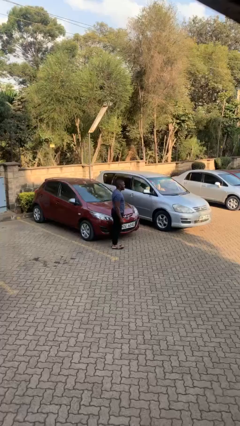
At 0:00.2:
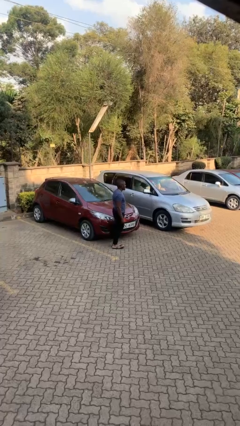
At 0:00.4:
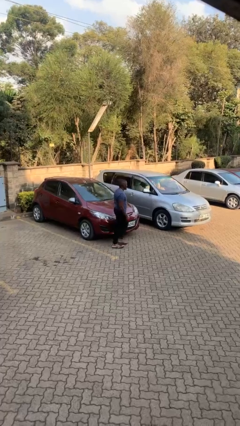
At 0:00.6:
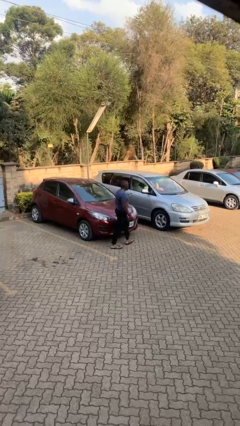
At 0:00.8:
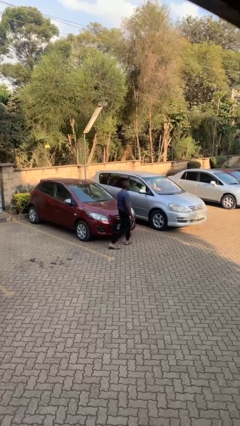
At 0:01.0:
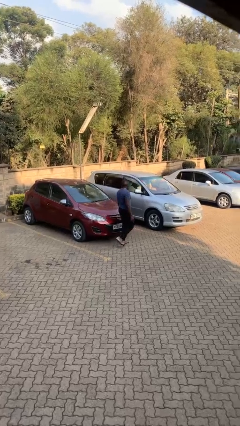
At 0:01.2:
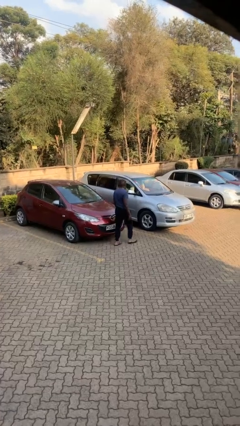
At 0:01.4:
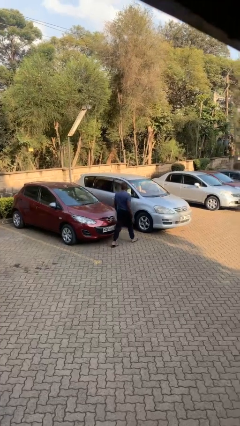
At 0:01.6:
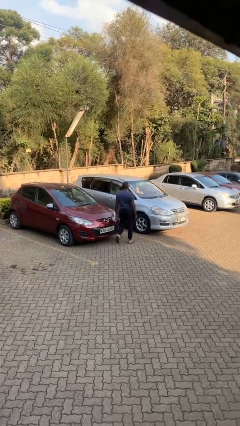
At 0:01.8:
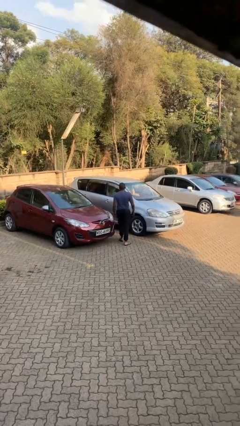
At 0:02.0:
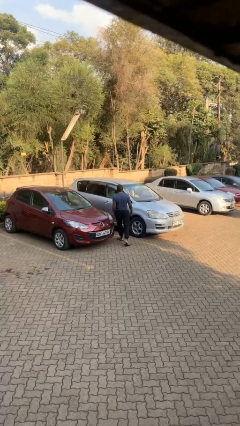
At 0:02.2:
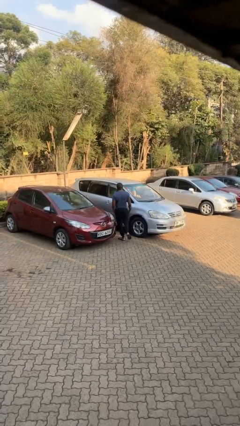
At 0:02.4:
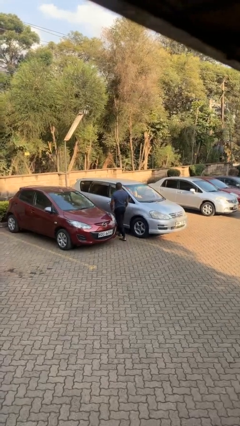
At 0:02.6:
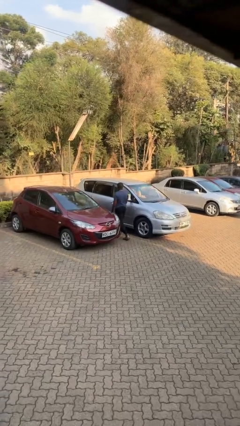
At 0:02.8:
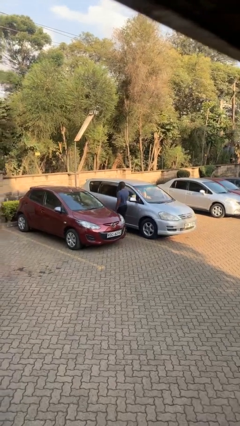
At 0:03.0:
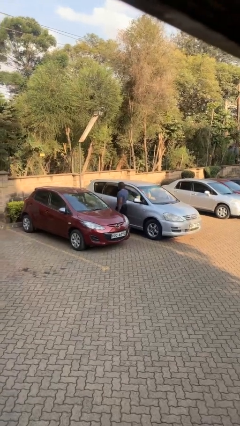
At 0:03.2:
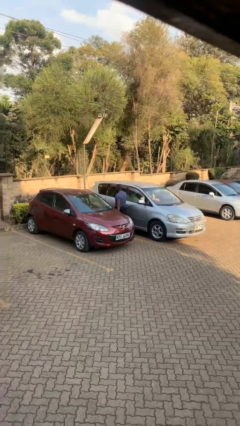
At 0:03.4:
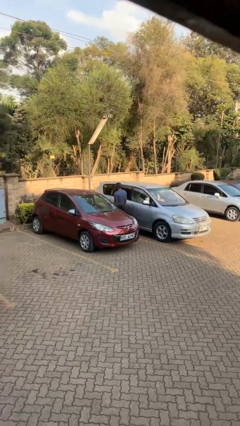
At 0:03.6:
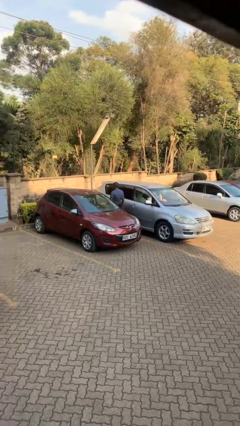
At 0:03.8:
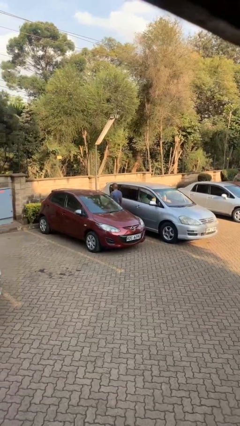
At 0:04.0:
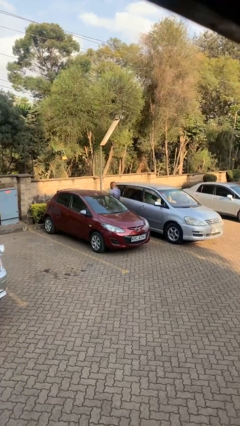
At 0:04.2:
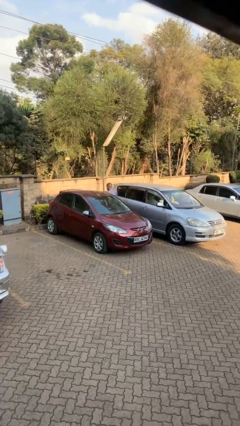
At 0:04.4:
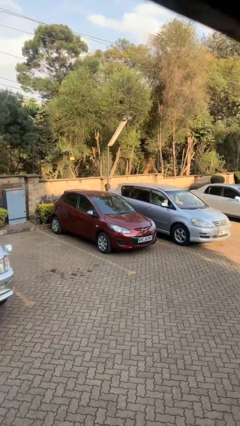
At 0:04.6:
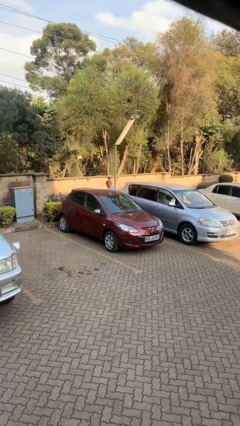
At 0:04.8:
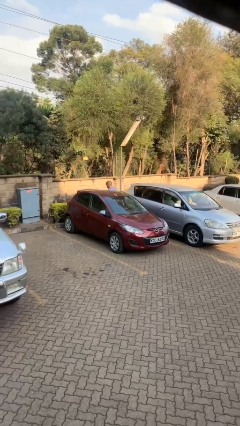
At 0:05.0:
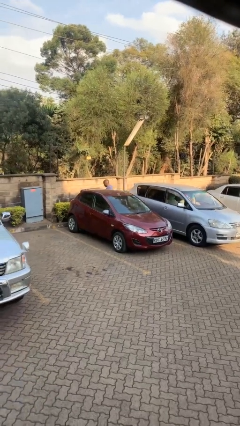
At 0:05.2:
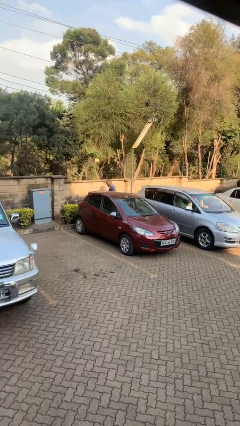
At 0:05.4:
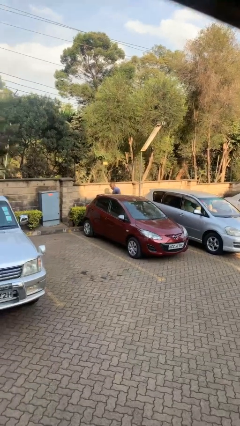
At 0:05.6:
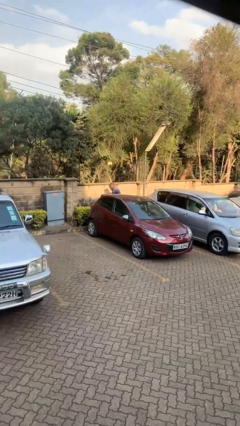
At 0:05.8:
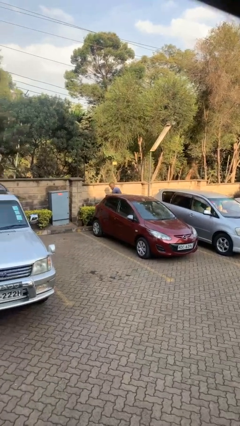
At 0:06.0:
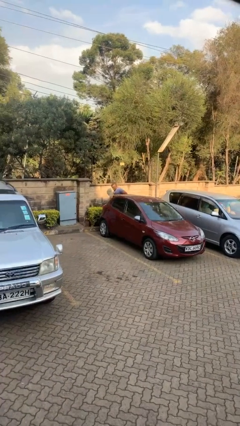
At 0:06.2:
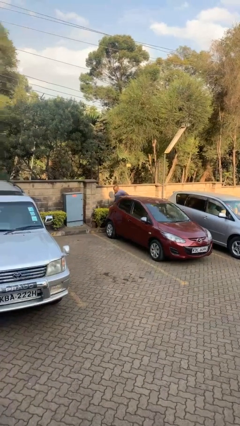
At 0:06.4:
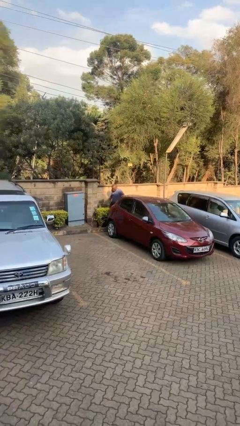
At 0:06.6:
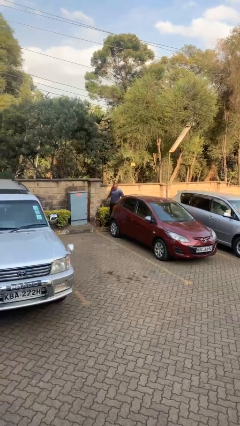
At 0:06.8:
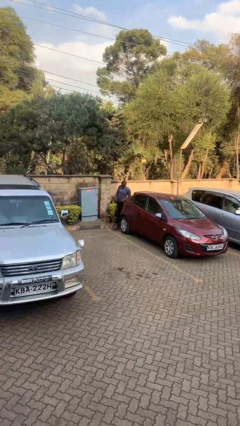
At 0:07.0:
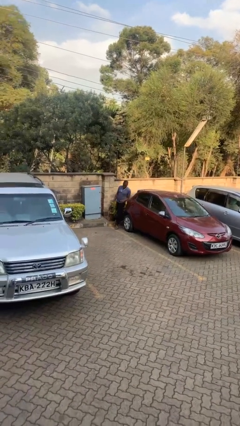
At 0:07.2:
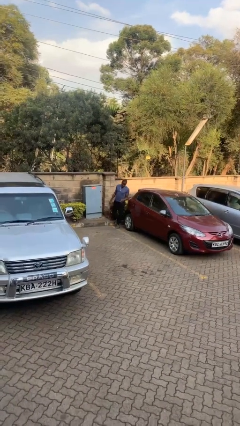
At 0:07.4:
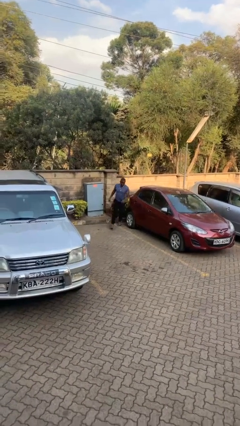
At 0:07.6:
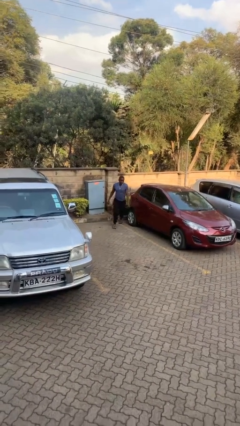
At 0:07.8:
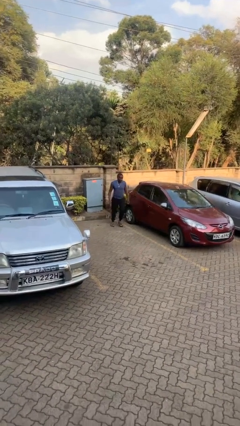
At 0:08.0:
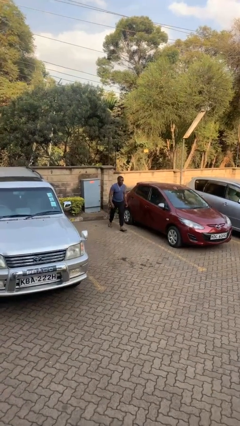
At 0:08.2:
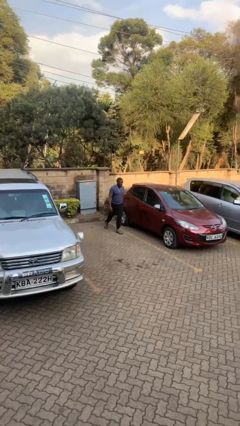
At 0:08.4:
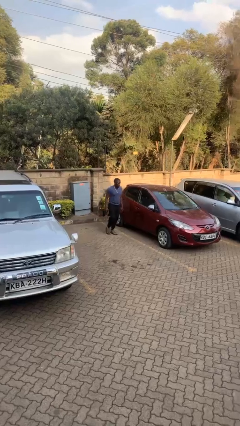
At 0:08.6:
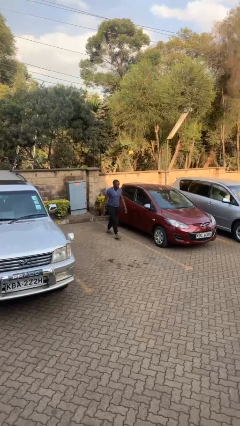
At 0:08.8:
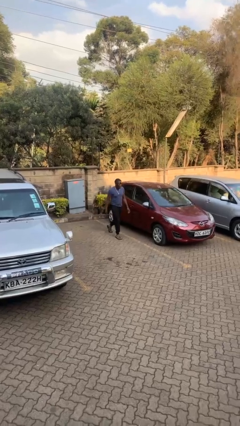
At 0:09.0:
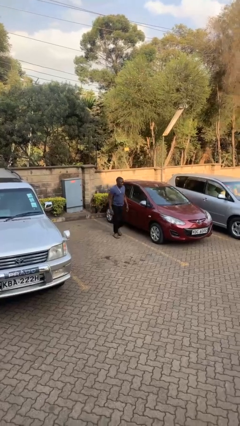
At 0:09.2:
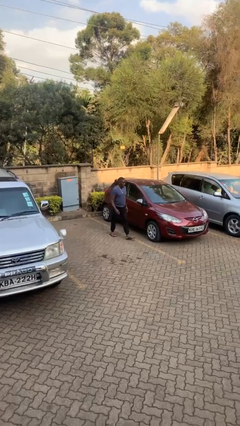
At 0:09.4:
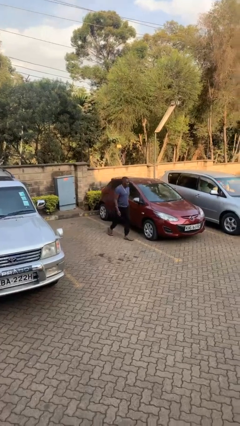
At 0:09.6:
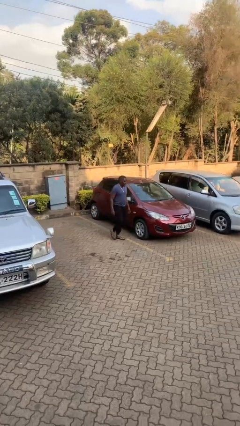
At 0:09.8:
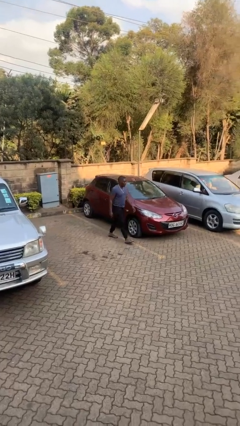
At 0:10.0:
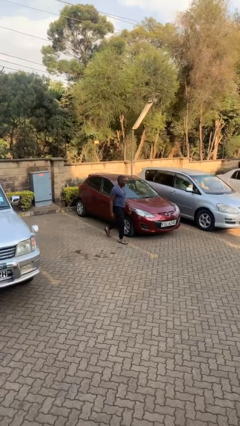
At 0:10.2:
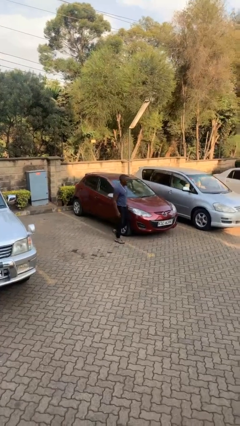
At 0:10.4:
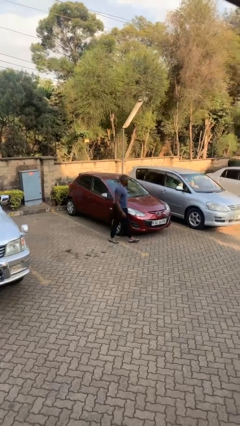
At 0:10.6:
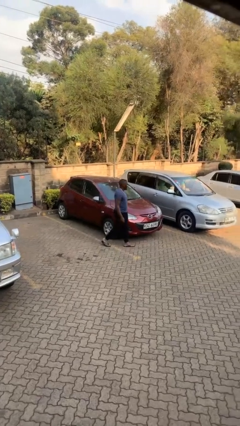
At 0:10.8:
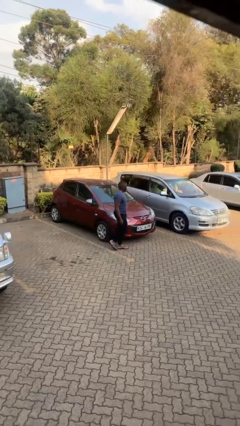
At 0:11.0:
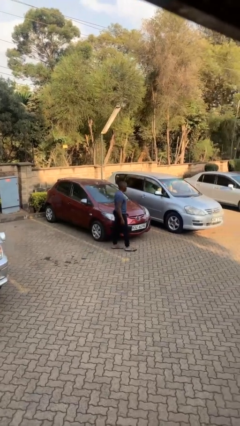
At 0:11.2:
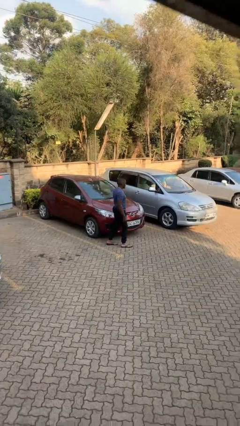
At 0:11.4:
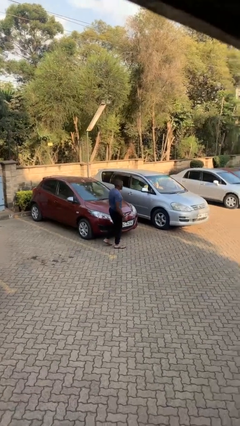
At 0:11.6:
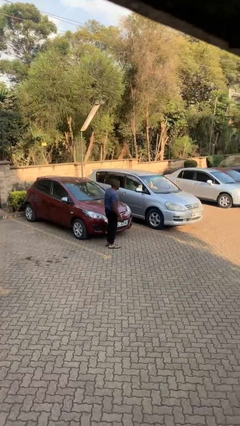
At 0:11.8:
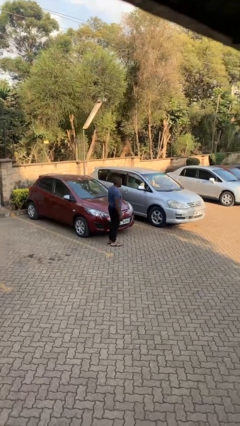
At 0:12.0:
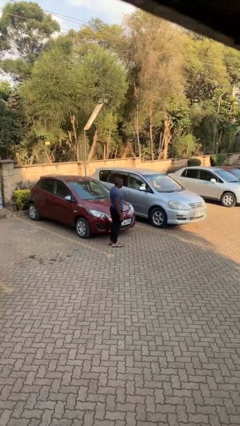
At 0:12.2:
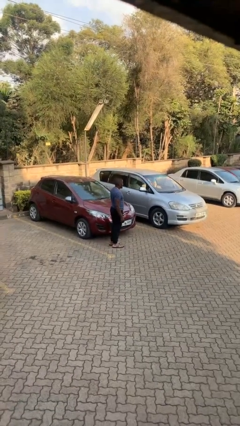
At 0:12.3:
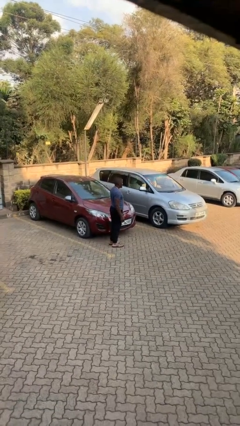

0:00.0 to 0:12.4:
person walks around car

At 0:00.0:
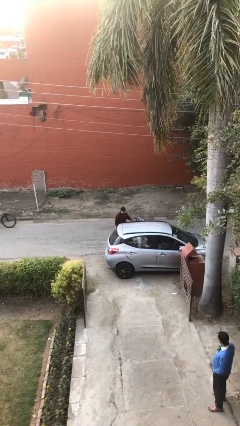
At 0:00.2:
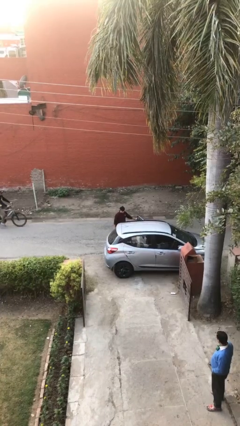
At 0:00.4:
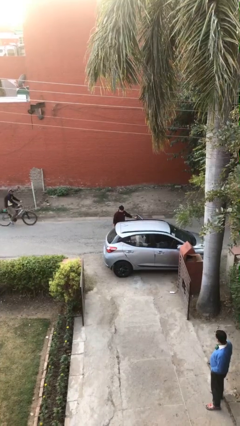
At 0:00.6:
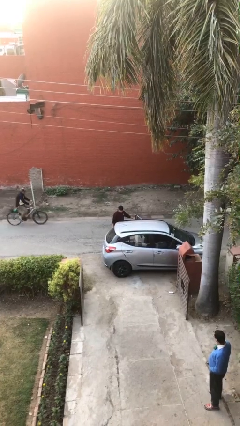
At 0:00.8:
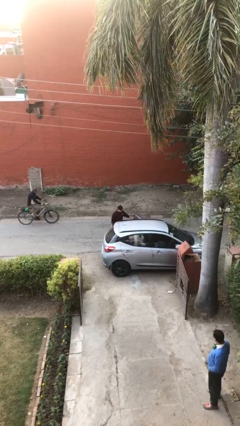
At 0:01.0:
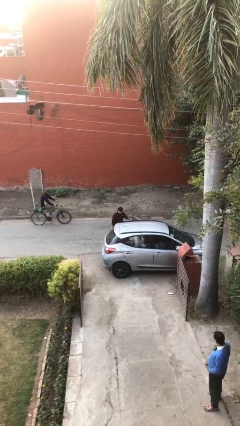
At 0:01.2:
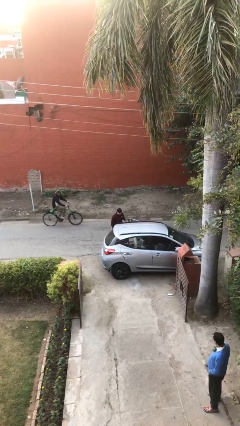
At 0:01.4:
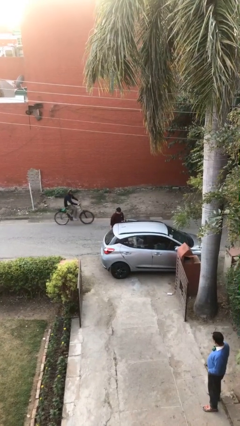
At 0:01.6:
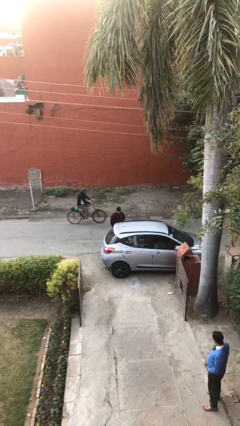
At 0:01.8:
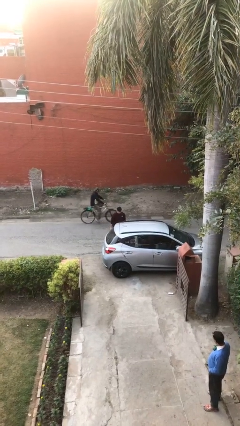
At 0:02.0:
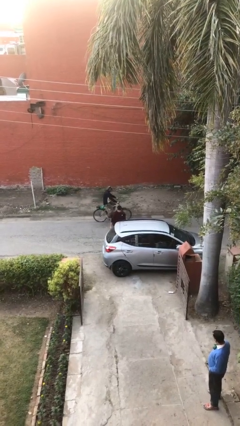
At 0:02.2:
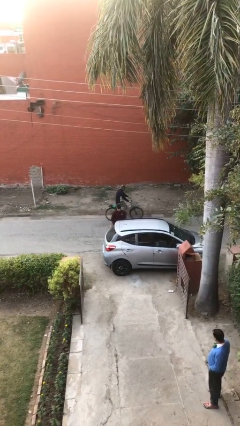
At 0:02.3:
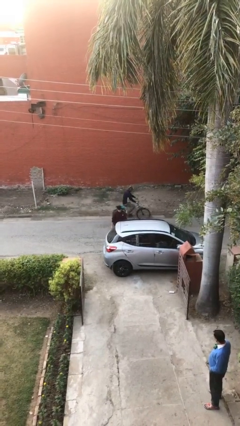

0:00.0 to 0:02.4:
person closes car door

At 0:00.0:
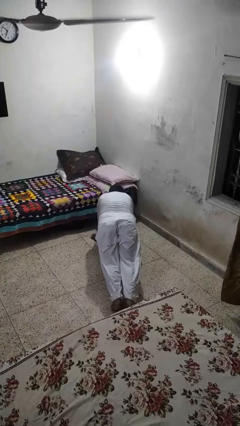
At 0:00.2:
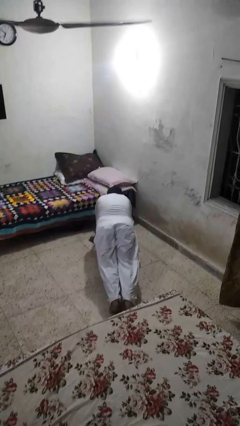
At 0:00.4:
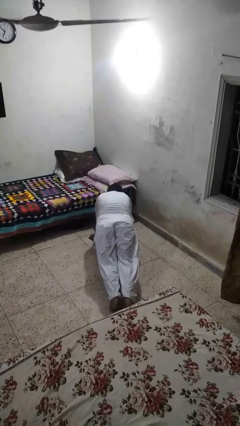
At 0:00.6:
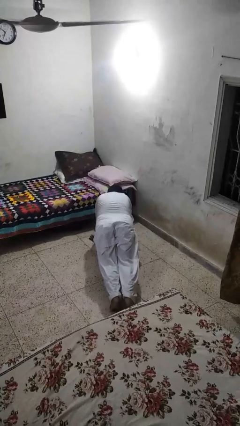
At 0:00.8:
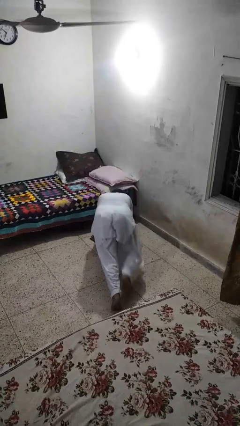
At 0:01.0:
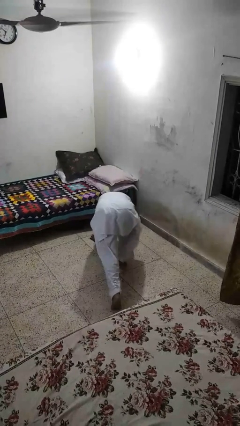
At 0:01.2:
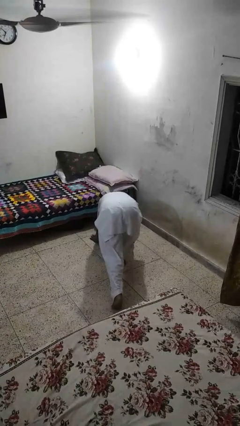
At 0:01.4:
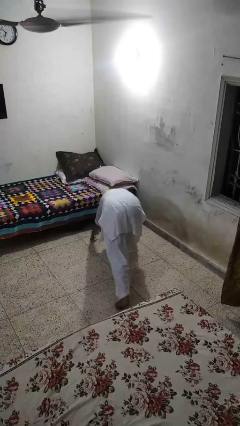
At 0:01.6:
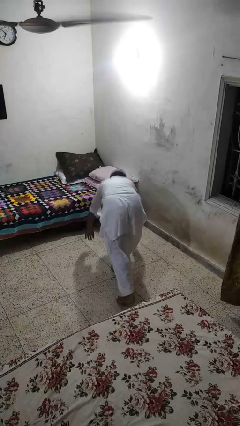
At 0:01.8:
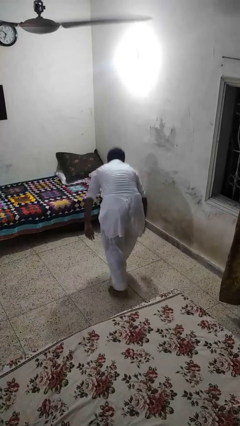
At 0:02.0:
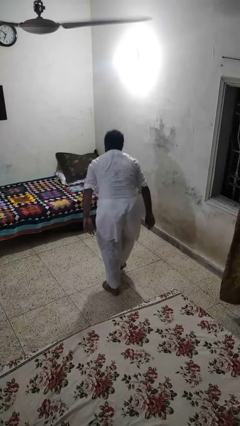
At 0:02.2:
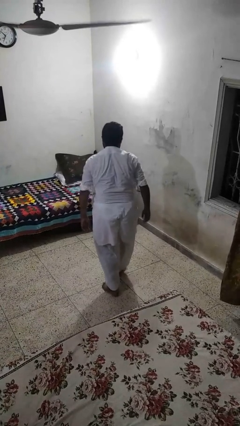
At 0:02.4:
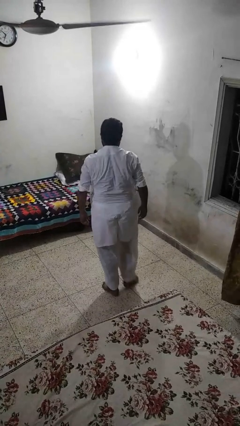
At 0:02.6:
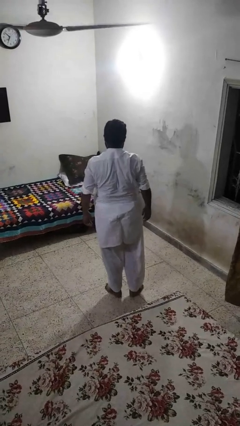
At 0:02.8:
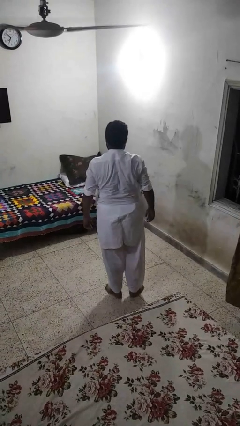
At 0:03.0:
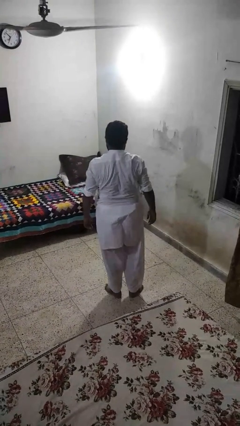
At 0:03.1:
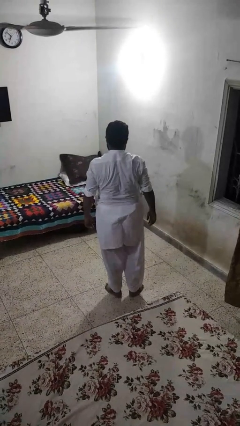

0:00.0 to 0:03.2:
person stands up from floor
